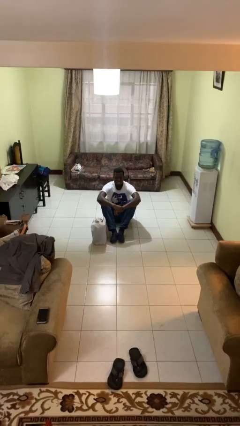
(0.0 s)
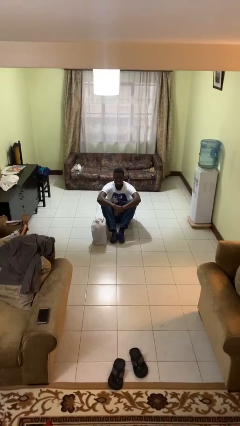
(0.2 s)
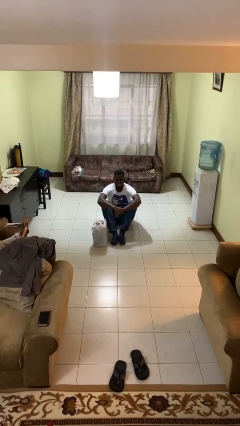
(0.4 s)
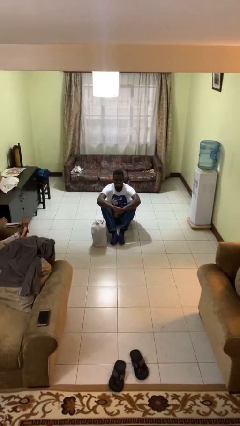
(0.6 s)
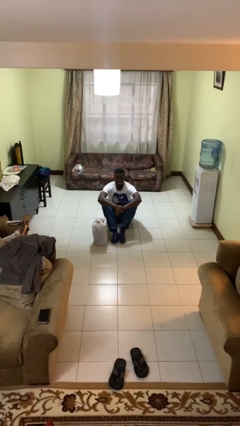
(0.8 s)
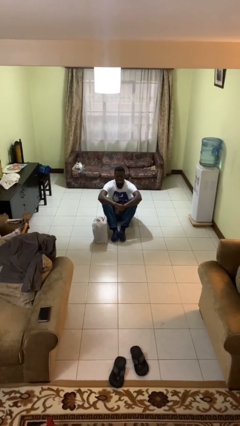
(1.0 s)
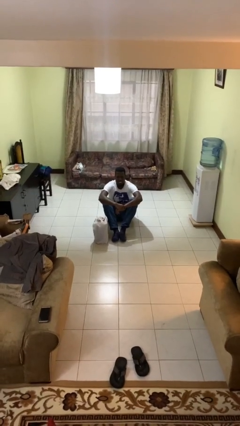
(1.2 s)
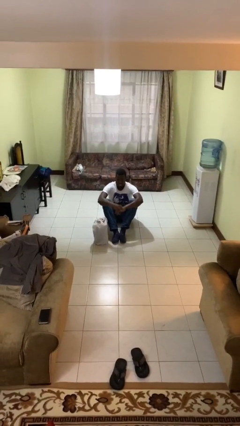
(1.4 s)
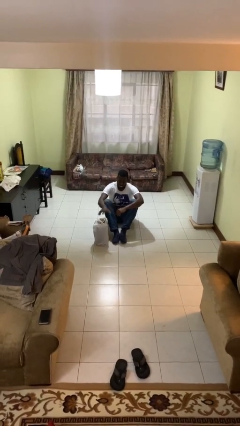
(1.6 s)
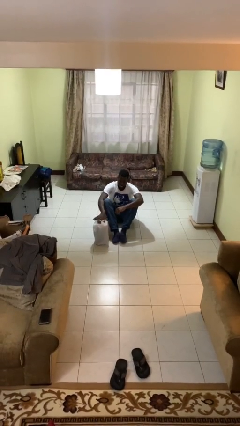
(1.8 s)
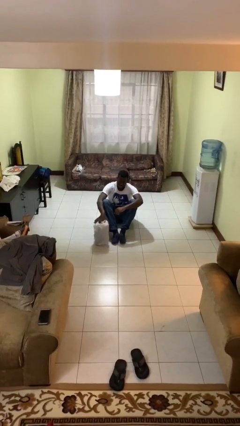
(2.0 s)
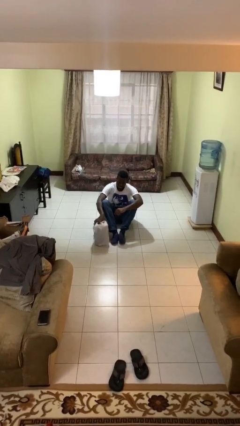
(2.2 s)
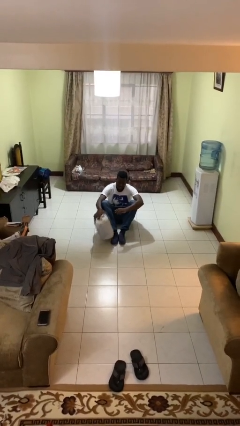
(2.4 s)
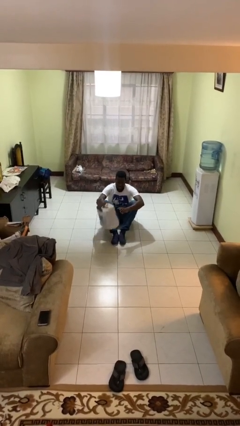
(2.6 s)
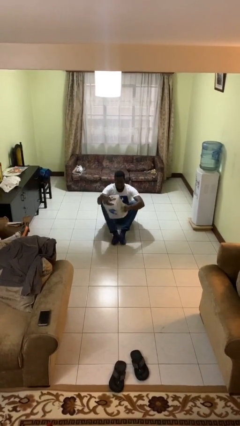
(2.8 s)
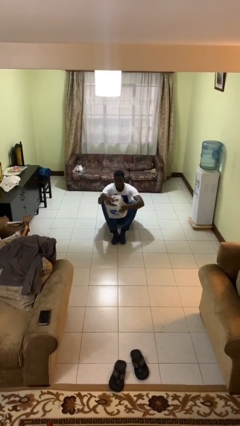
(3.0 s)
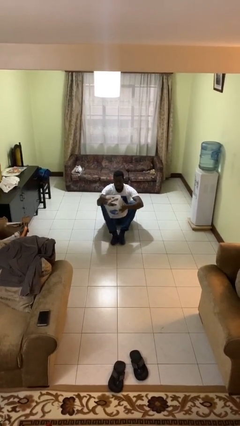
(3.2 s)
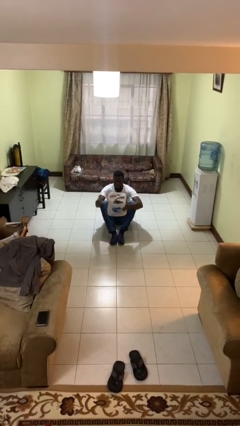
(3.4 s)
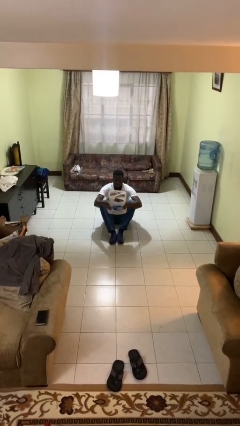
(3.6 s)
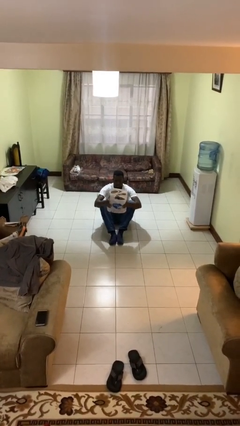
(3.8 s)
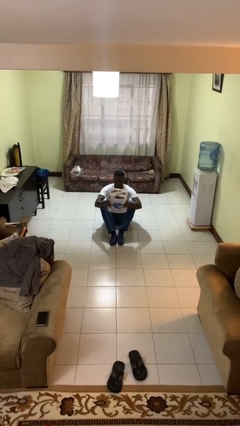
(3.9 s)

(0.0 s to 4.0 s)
person picks up object from floor

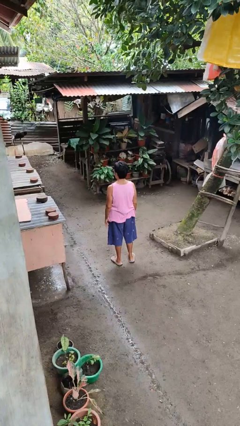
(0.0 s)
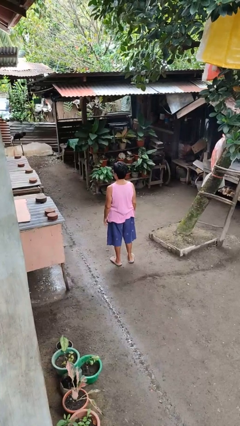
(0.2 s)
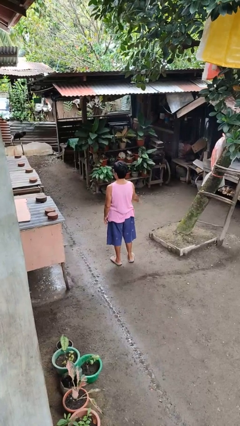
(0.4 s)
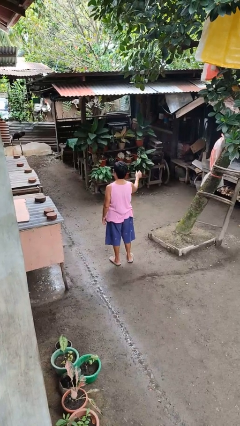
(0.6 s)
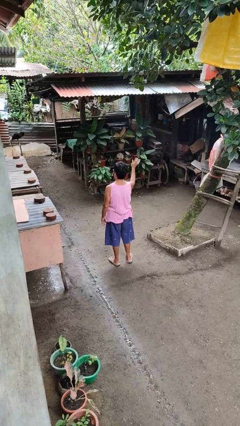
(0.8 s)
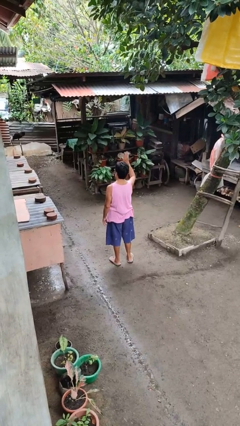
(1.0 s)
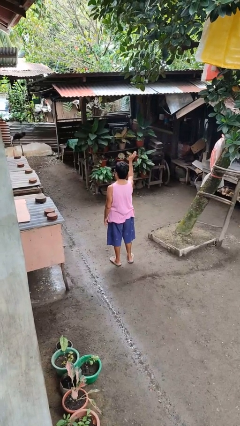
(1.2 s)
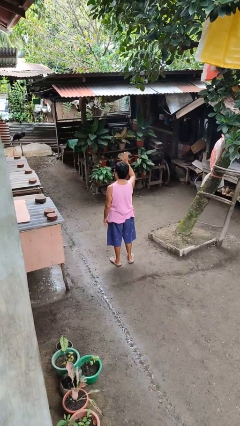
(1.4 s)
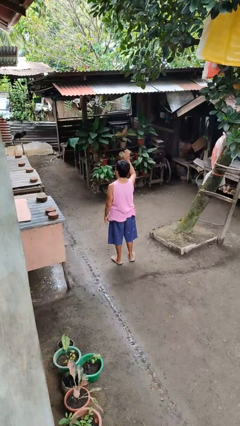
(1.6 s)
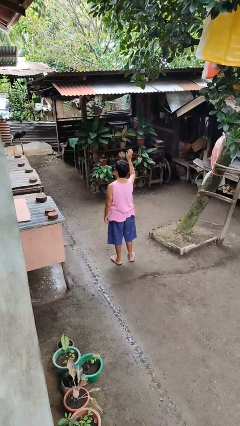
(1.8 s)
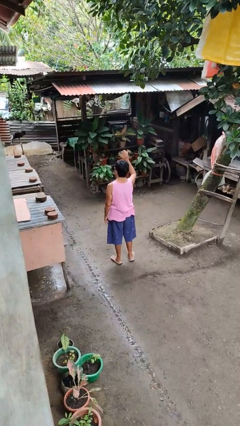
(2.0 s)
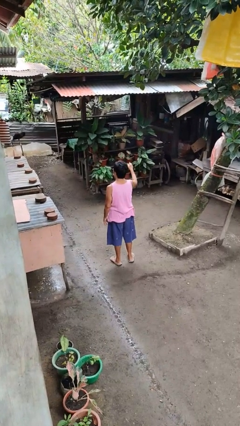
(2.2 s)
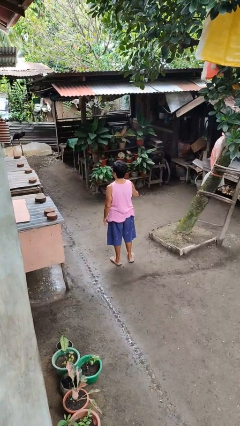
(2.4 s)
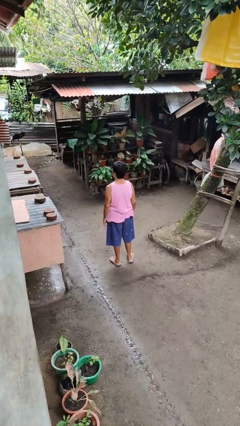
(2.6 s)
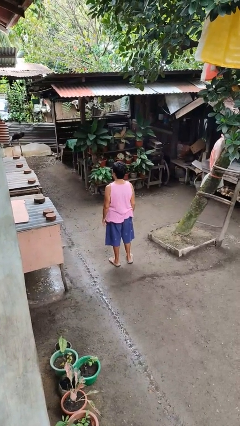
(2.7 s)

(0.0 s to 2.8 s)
person waves at person

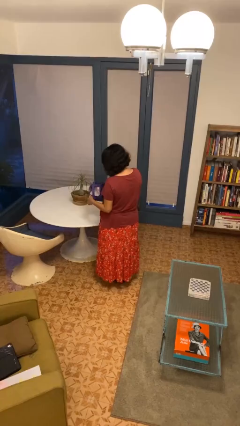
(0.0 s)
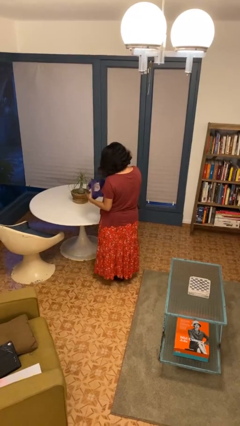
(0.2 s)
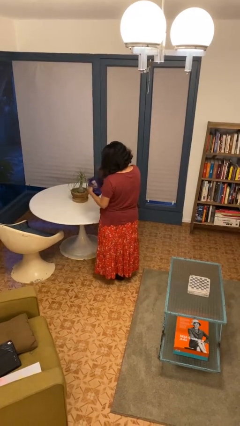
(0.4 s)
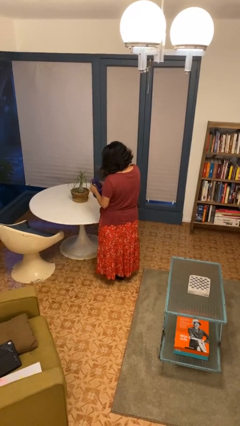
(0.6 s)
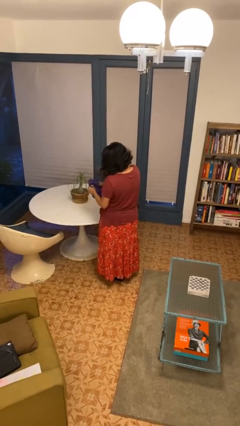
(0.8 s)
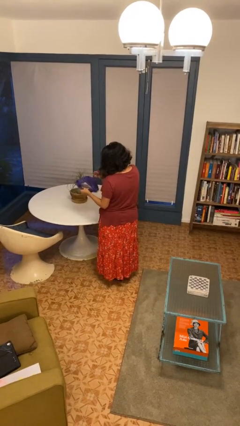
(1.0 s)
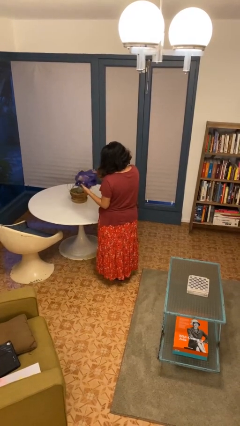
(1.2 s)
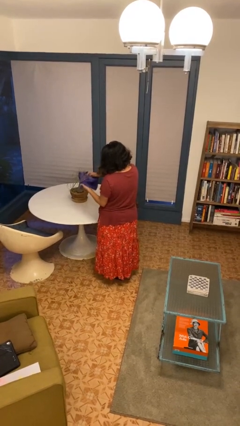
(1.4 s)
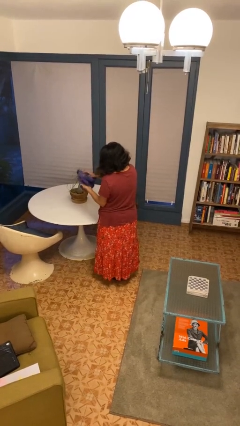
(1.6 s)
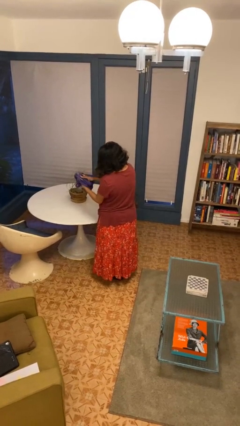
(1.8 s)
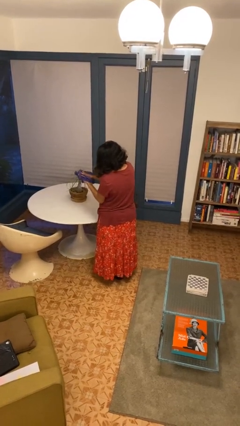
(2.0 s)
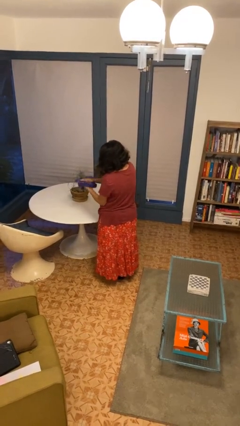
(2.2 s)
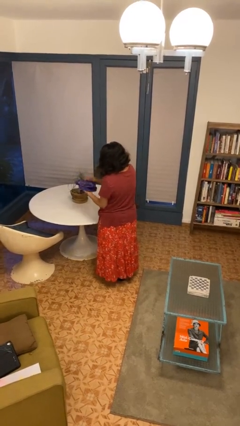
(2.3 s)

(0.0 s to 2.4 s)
person squeezes object

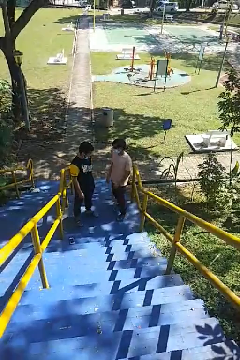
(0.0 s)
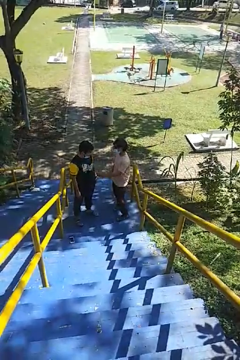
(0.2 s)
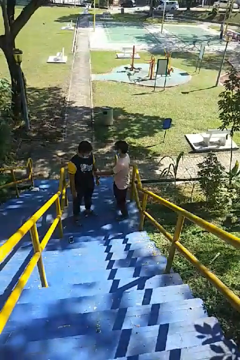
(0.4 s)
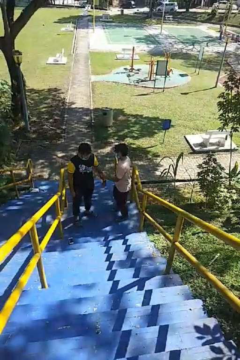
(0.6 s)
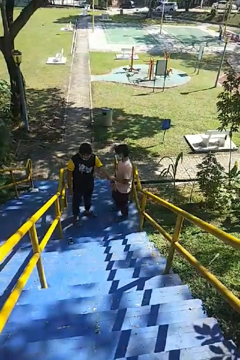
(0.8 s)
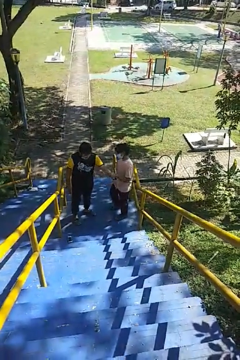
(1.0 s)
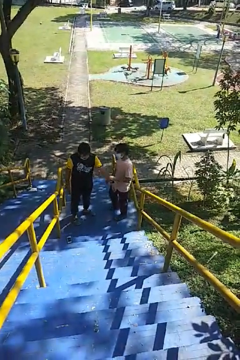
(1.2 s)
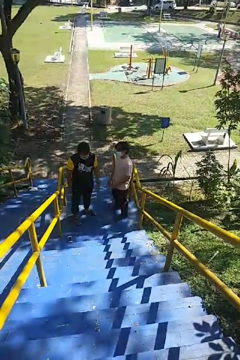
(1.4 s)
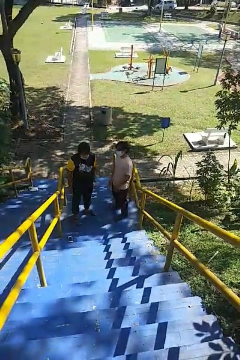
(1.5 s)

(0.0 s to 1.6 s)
person grabs person by forearm

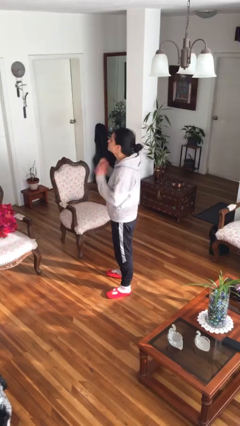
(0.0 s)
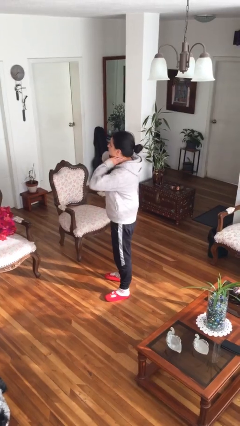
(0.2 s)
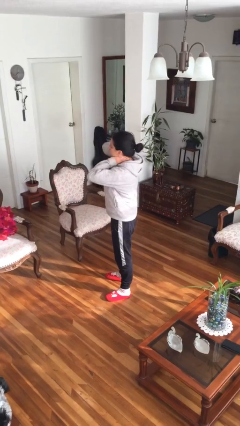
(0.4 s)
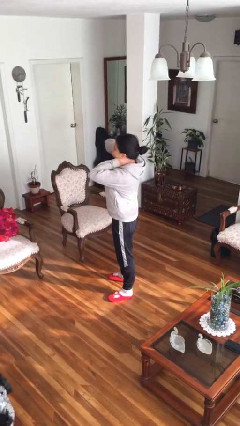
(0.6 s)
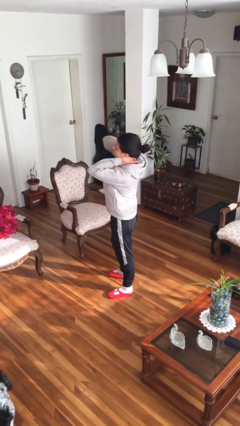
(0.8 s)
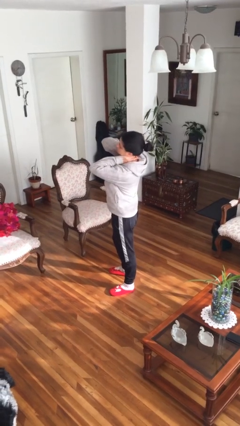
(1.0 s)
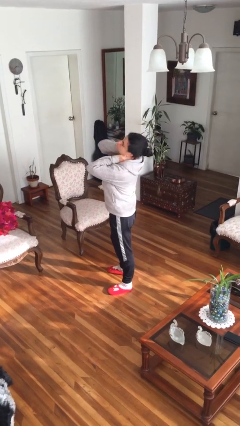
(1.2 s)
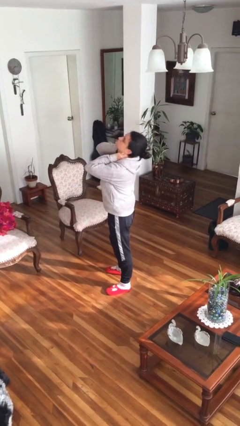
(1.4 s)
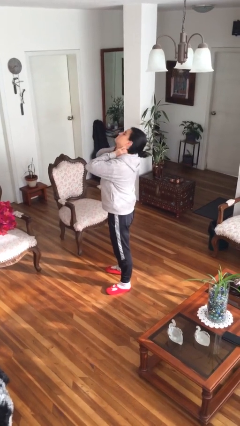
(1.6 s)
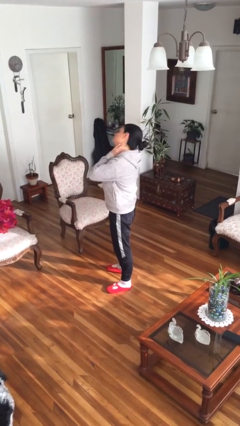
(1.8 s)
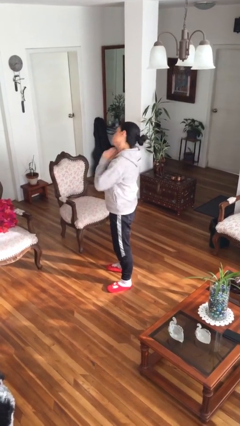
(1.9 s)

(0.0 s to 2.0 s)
person rubs neck

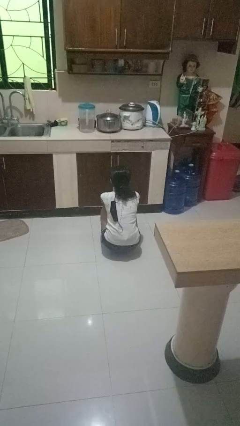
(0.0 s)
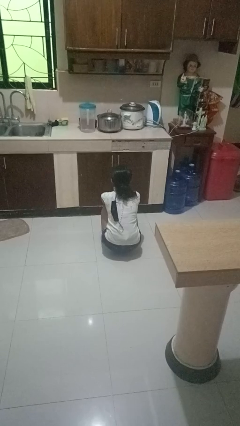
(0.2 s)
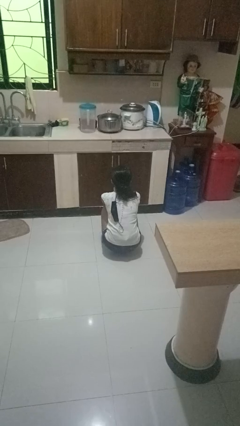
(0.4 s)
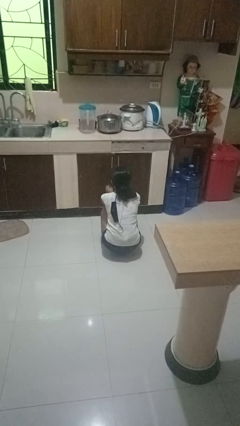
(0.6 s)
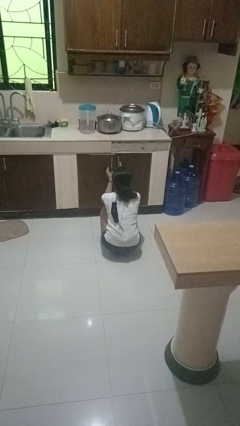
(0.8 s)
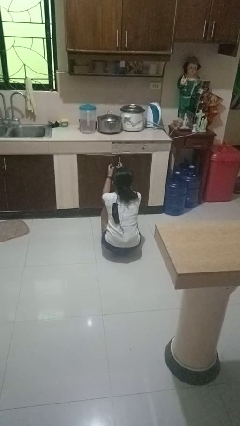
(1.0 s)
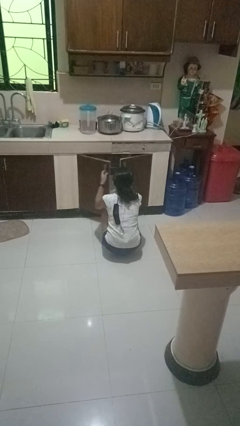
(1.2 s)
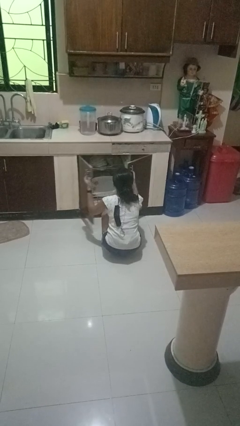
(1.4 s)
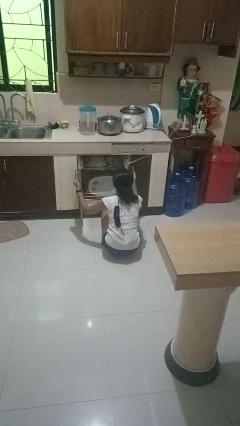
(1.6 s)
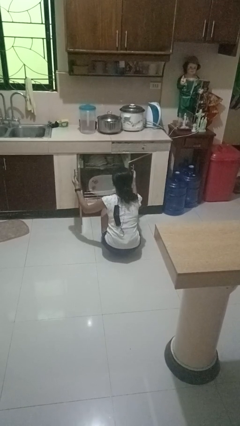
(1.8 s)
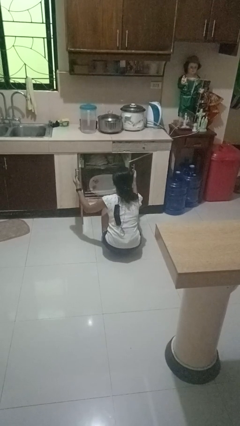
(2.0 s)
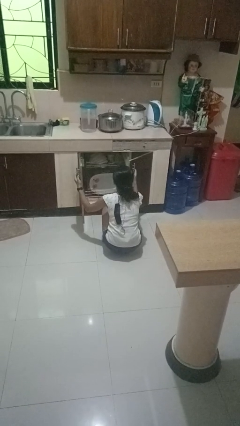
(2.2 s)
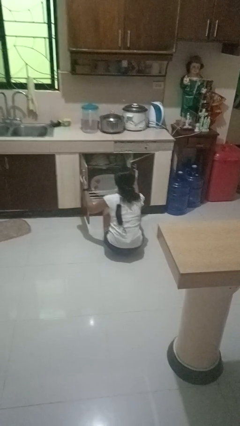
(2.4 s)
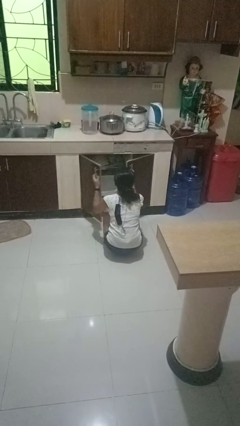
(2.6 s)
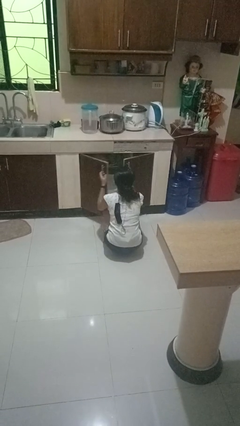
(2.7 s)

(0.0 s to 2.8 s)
person opens dishwasher

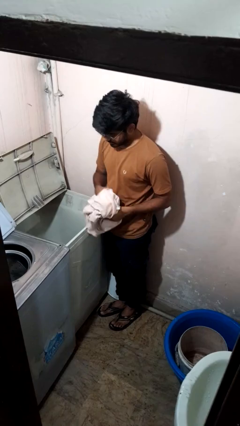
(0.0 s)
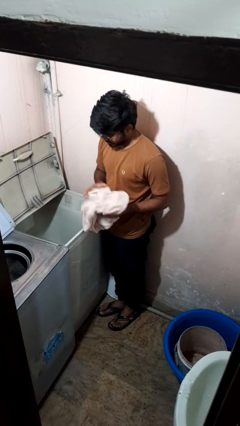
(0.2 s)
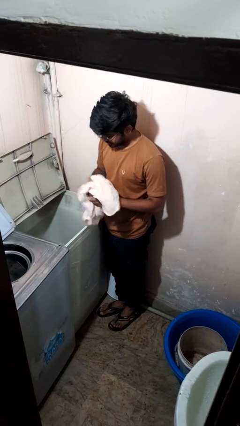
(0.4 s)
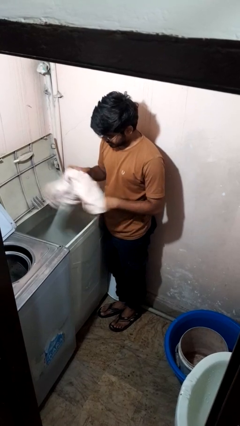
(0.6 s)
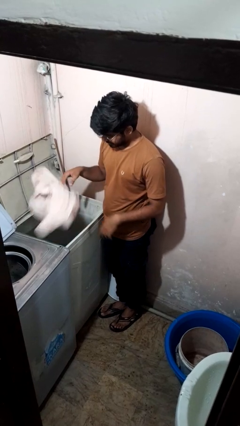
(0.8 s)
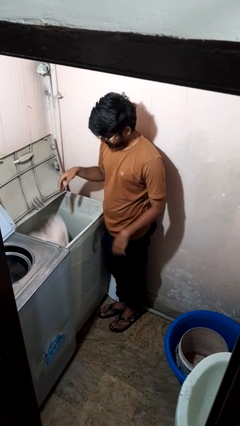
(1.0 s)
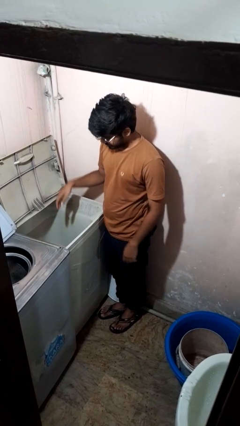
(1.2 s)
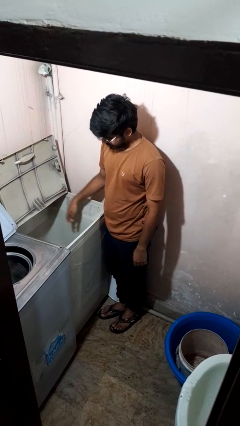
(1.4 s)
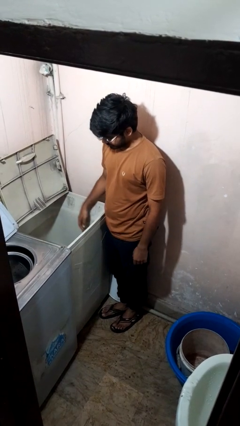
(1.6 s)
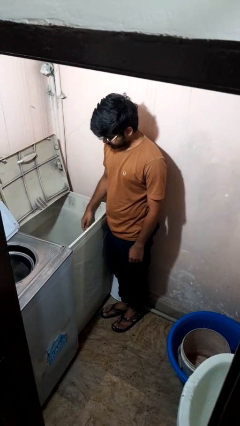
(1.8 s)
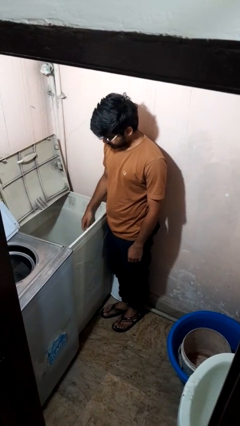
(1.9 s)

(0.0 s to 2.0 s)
person loads clotheswasher
